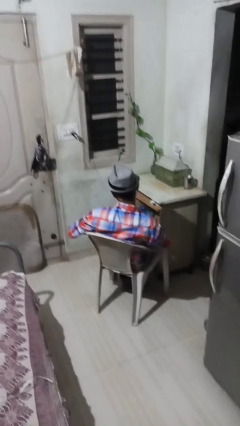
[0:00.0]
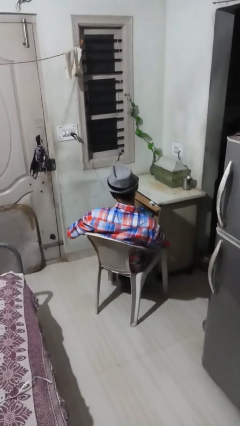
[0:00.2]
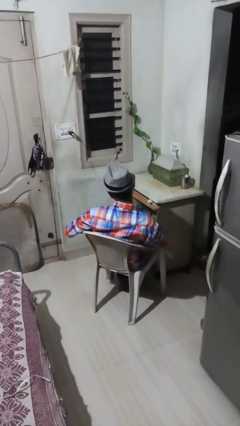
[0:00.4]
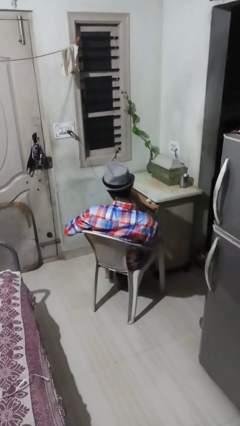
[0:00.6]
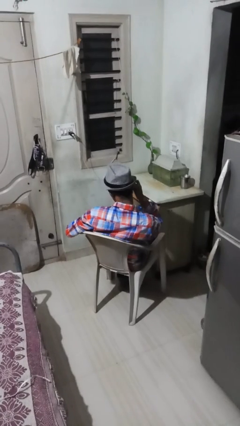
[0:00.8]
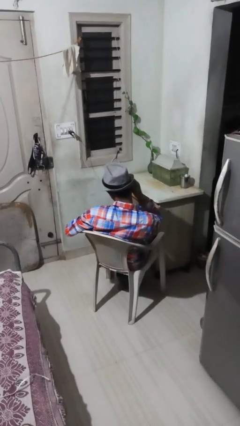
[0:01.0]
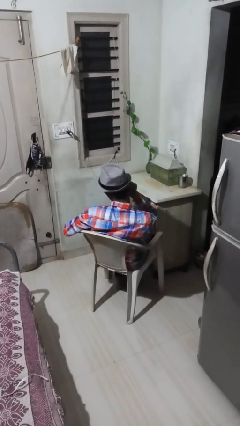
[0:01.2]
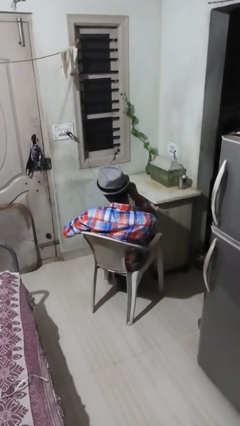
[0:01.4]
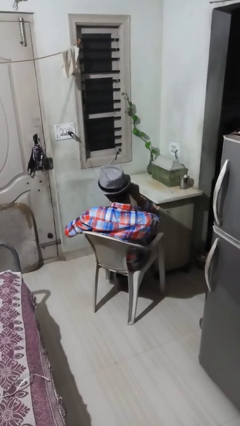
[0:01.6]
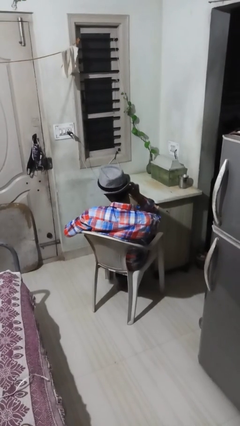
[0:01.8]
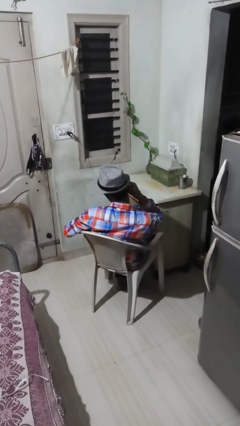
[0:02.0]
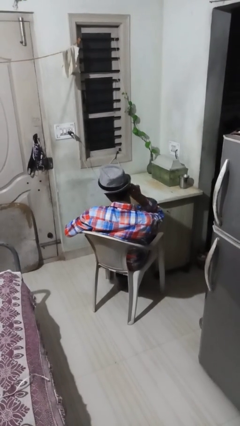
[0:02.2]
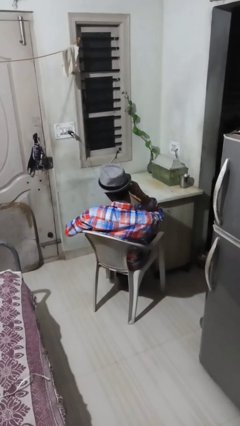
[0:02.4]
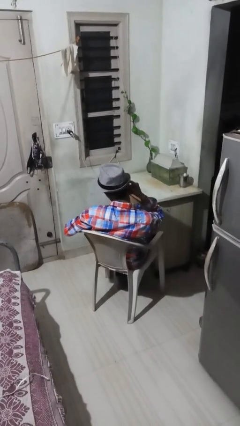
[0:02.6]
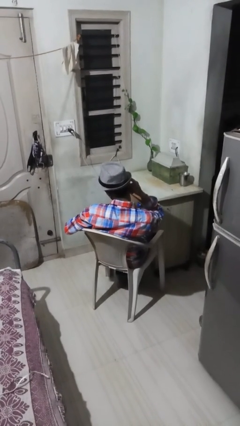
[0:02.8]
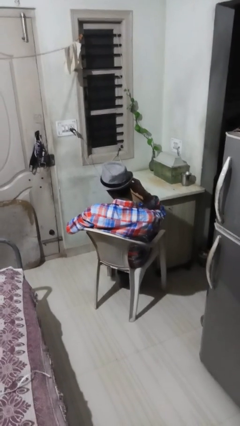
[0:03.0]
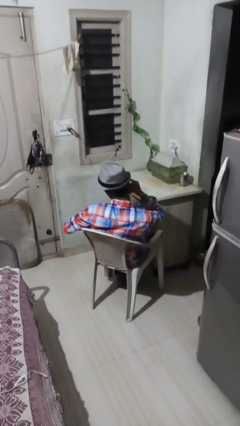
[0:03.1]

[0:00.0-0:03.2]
person puts fingers in ear

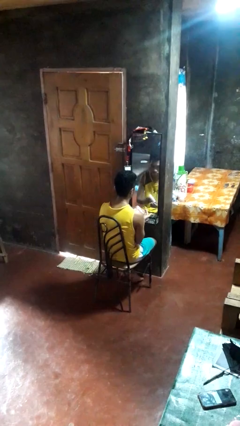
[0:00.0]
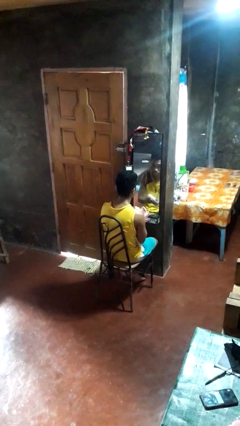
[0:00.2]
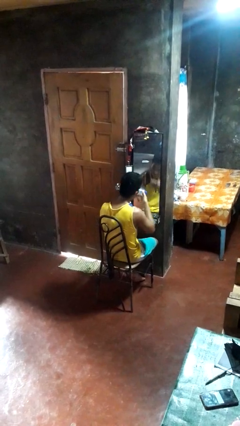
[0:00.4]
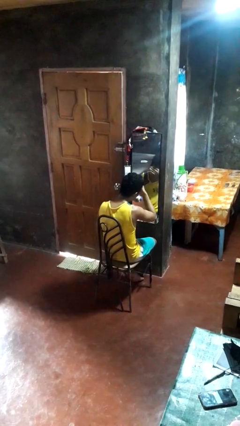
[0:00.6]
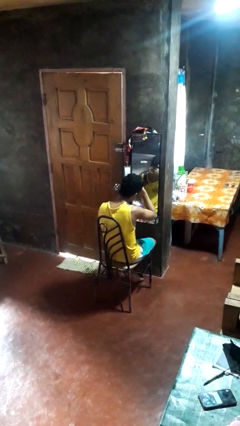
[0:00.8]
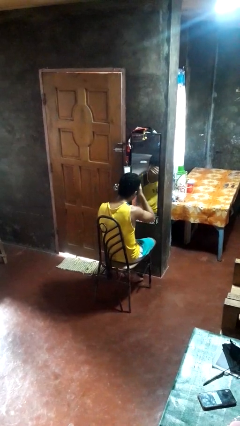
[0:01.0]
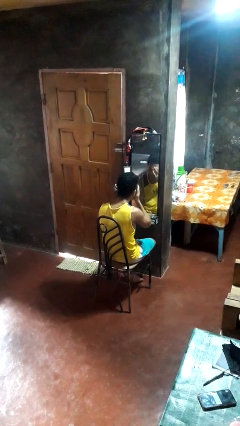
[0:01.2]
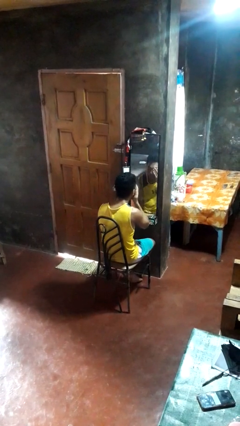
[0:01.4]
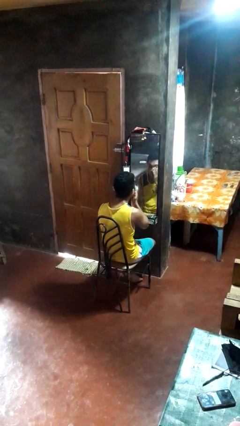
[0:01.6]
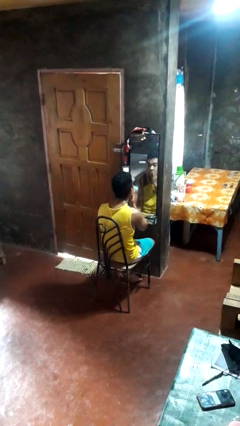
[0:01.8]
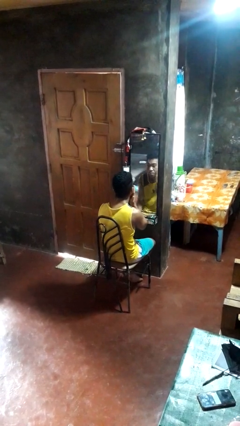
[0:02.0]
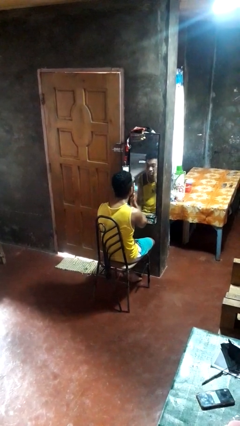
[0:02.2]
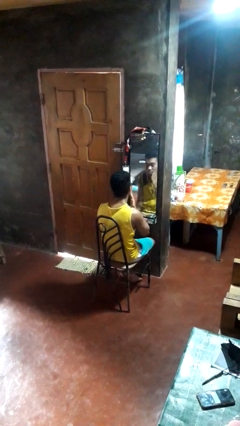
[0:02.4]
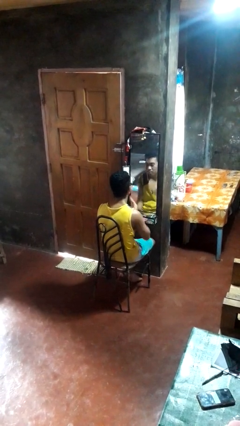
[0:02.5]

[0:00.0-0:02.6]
person applies foundation makeup

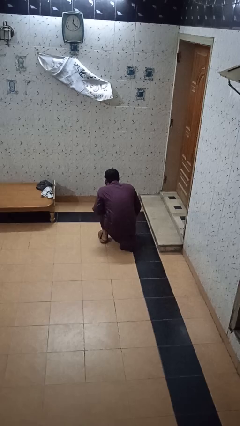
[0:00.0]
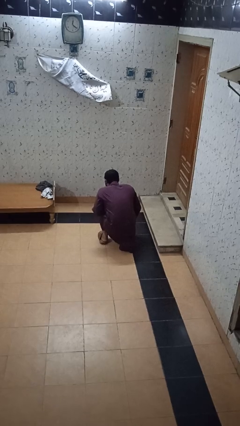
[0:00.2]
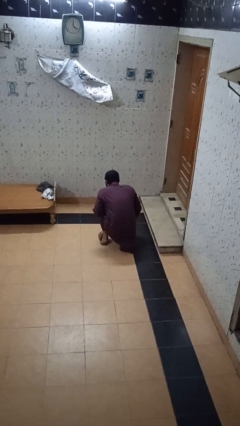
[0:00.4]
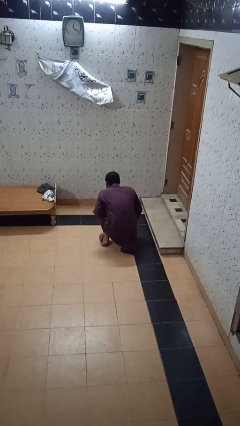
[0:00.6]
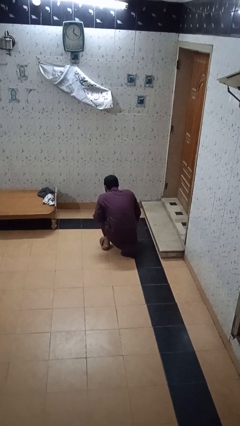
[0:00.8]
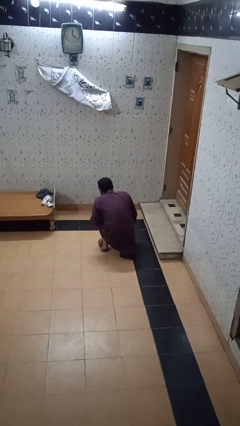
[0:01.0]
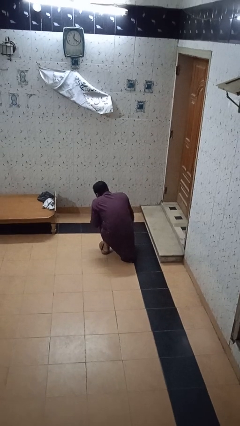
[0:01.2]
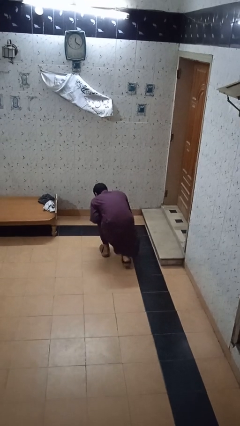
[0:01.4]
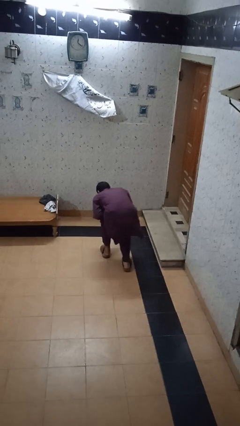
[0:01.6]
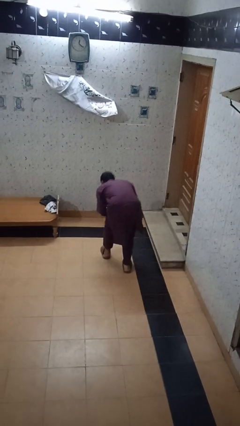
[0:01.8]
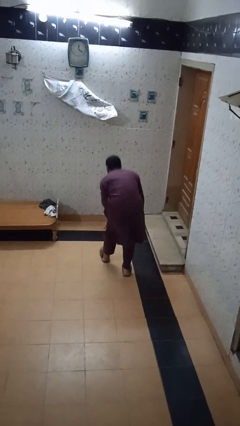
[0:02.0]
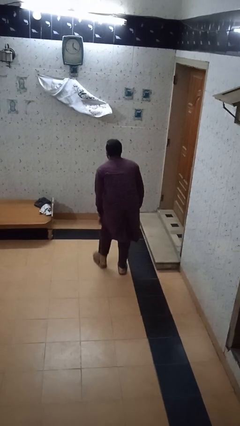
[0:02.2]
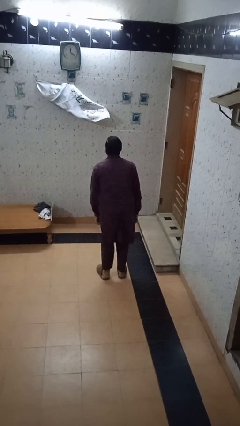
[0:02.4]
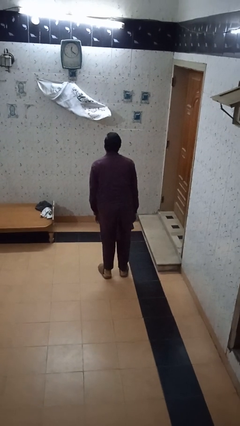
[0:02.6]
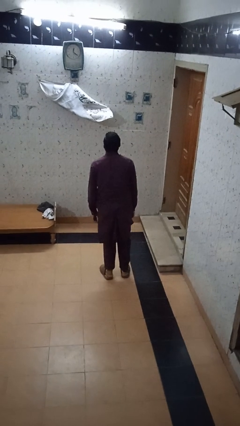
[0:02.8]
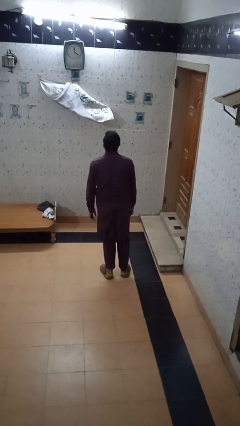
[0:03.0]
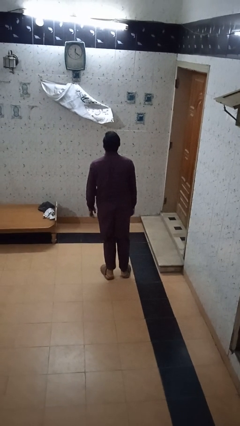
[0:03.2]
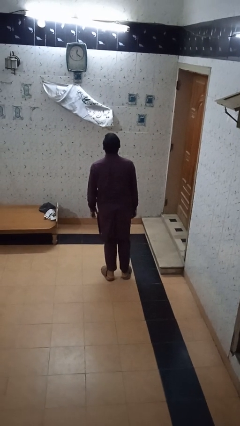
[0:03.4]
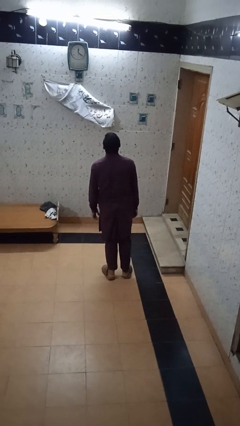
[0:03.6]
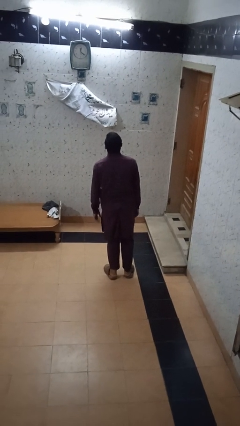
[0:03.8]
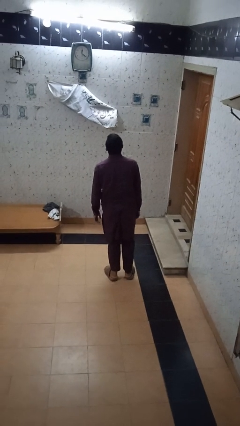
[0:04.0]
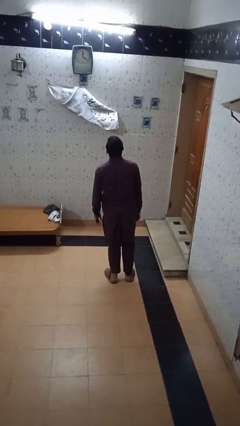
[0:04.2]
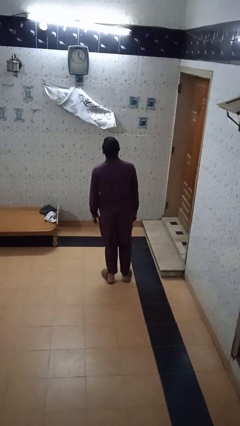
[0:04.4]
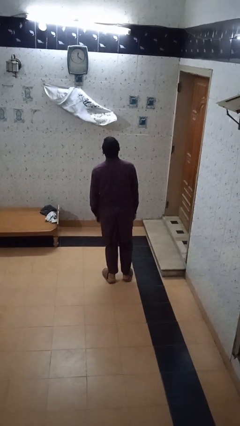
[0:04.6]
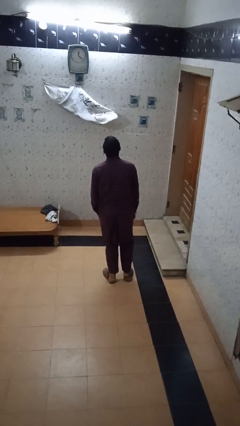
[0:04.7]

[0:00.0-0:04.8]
person stands up from floor

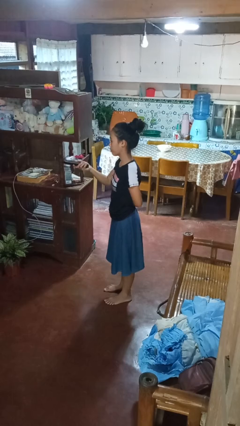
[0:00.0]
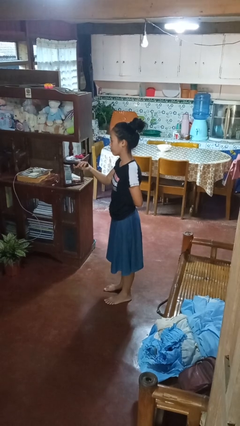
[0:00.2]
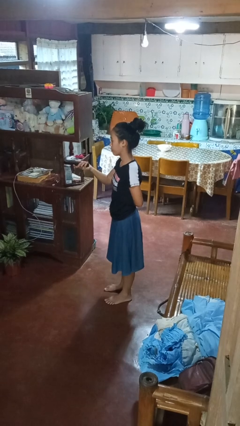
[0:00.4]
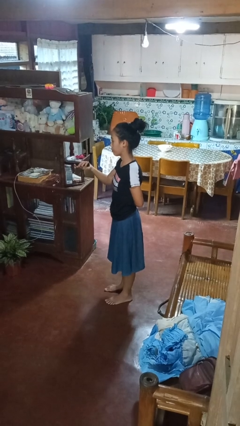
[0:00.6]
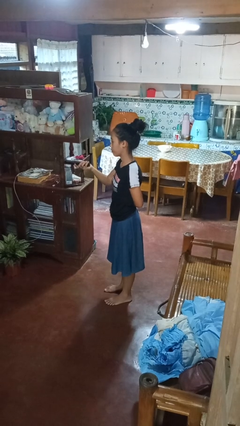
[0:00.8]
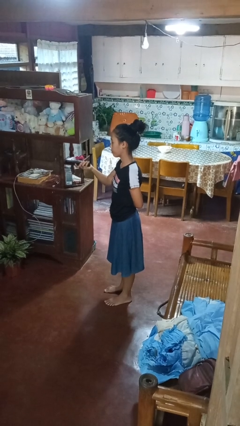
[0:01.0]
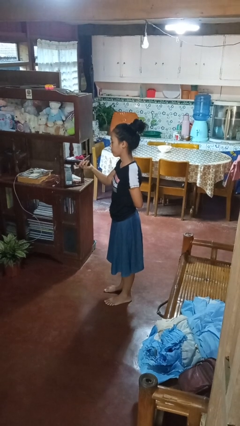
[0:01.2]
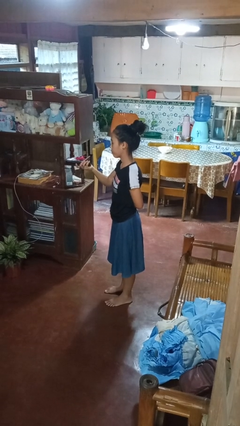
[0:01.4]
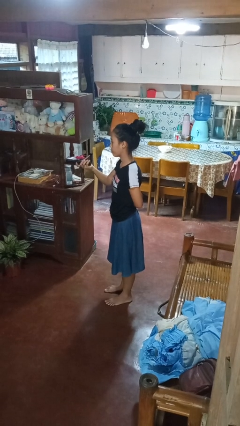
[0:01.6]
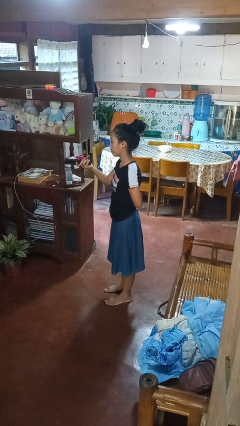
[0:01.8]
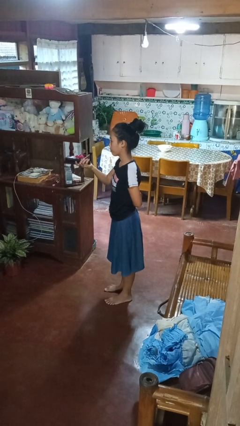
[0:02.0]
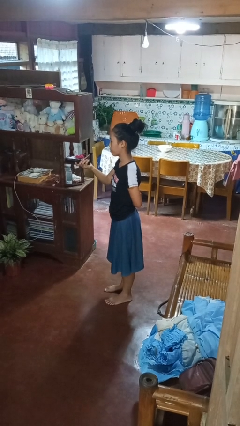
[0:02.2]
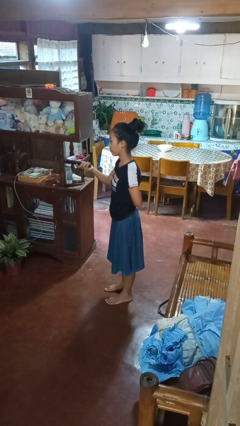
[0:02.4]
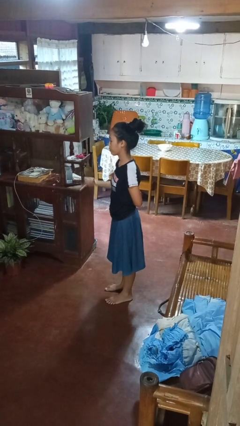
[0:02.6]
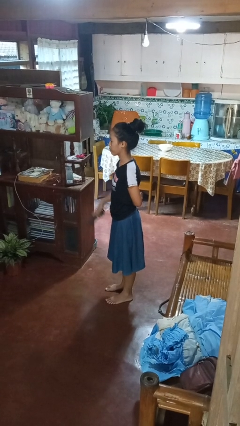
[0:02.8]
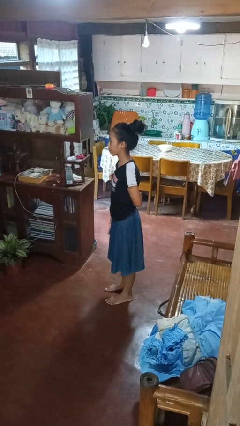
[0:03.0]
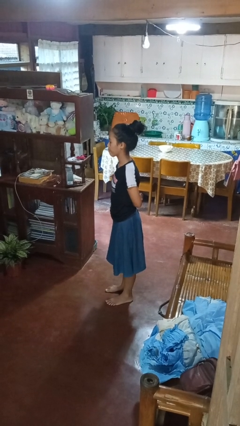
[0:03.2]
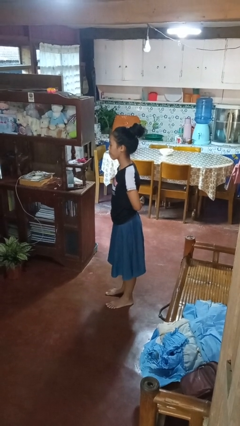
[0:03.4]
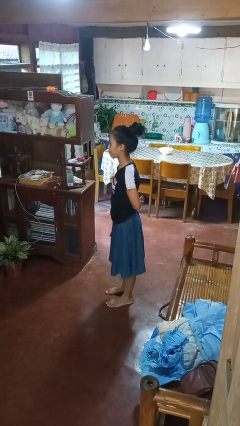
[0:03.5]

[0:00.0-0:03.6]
person uses television remote

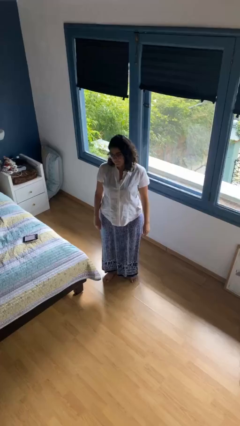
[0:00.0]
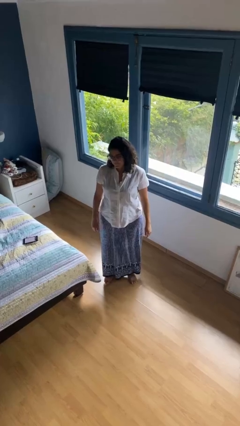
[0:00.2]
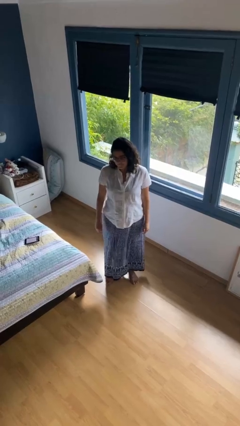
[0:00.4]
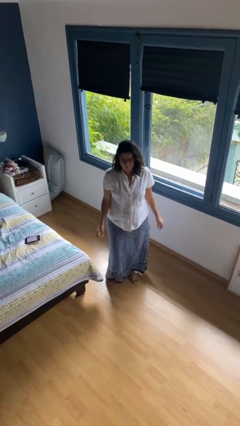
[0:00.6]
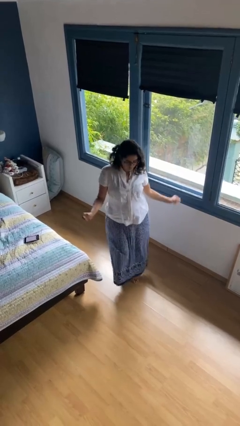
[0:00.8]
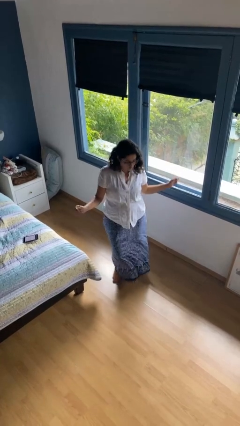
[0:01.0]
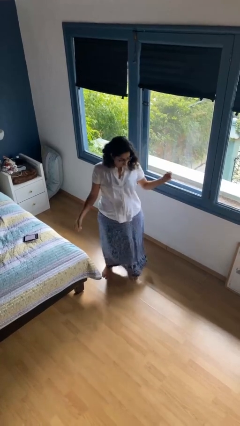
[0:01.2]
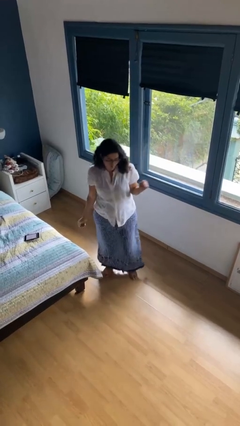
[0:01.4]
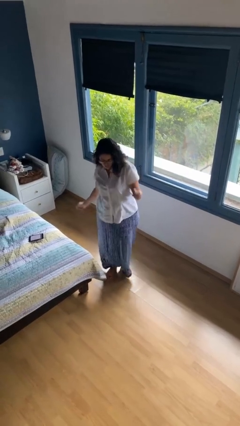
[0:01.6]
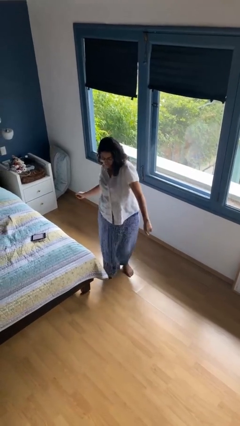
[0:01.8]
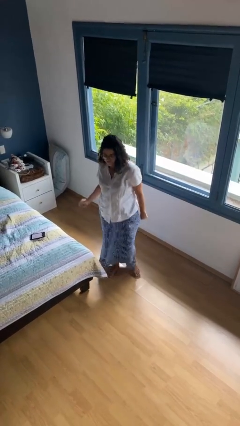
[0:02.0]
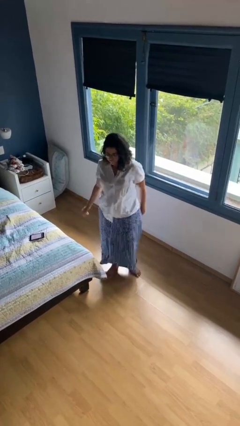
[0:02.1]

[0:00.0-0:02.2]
person dances in place

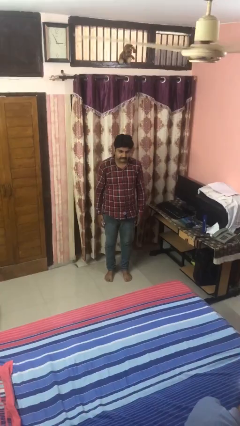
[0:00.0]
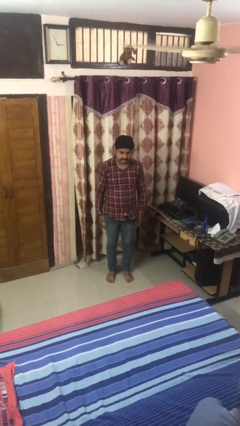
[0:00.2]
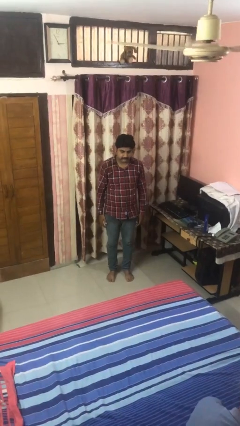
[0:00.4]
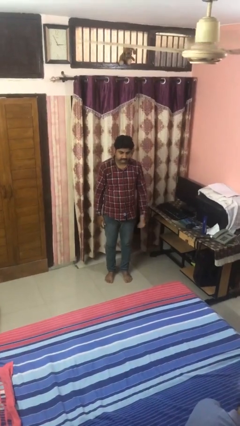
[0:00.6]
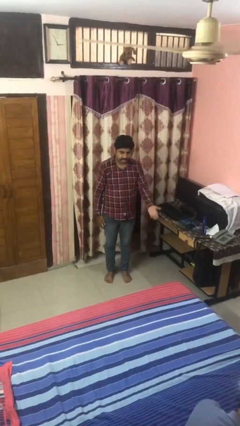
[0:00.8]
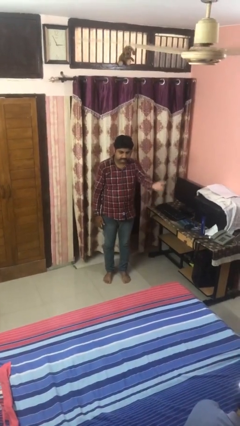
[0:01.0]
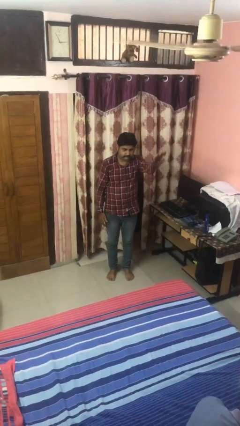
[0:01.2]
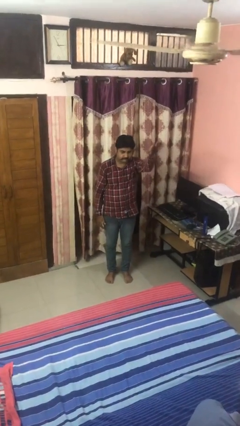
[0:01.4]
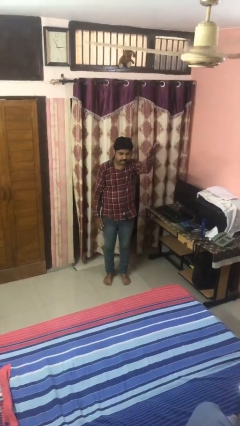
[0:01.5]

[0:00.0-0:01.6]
person gestures swipe up
